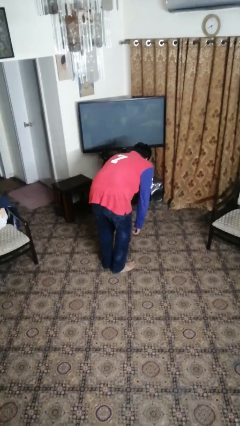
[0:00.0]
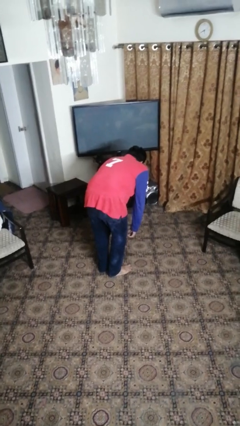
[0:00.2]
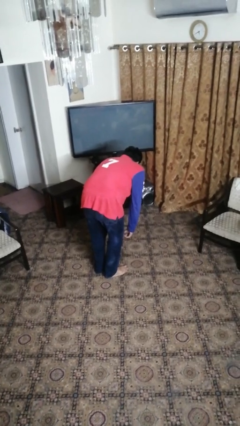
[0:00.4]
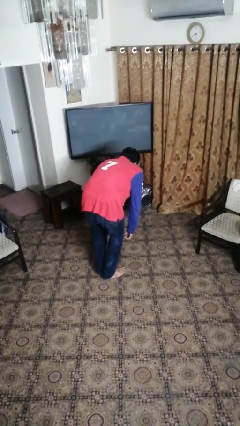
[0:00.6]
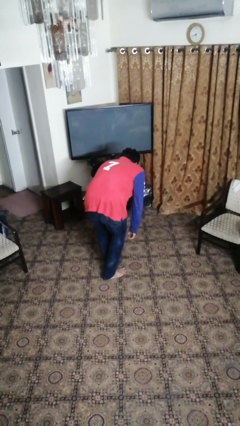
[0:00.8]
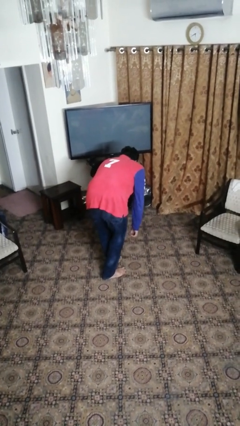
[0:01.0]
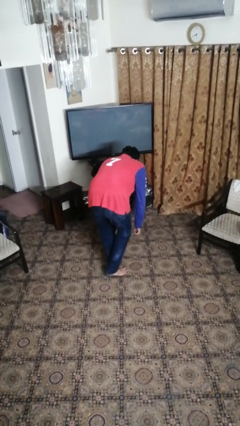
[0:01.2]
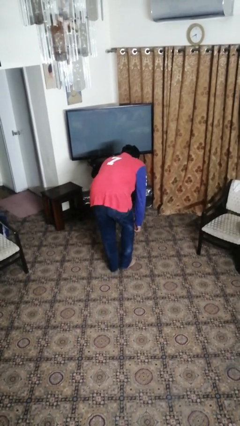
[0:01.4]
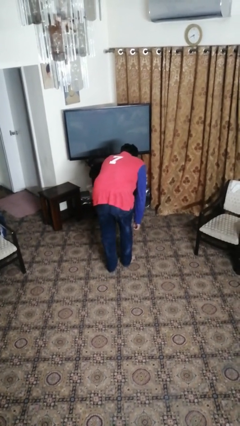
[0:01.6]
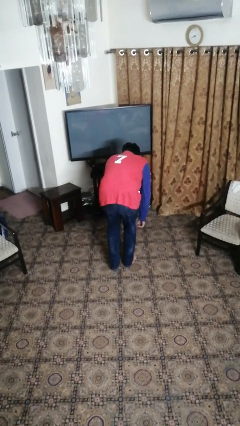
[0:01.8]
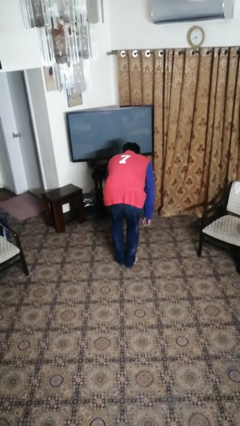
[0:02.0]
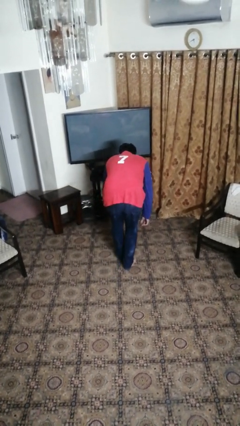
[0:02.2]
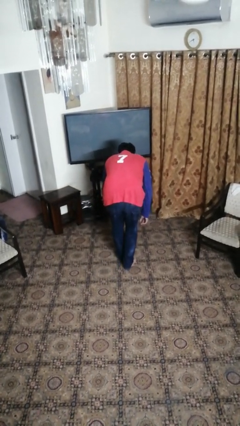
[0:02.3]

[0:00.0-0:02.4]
person walks tiptoe

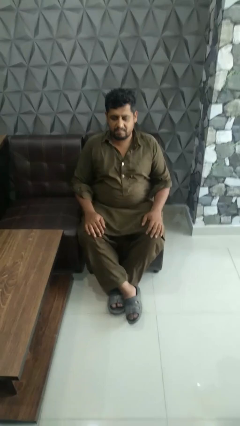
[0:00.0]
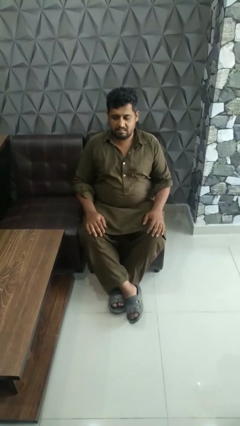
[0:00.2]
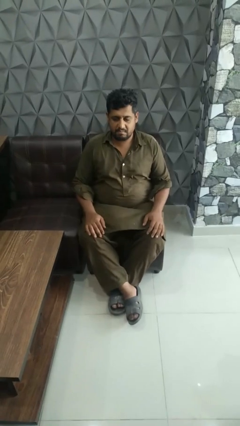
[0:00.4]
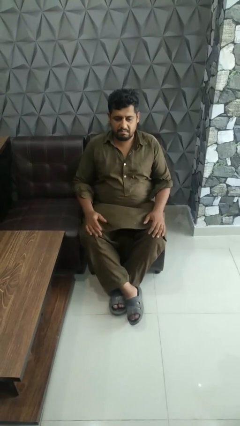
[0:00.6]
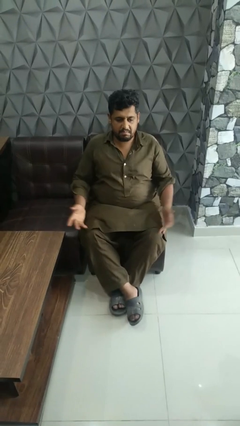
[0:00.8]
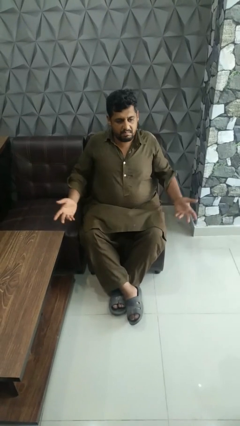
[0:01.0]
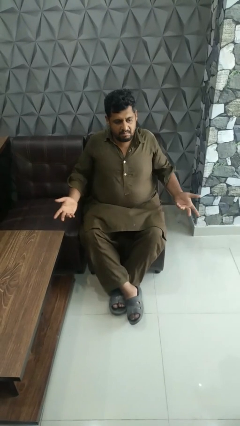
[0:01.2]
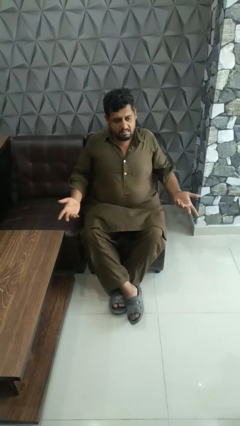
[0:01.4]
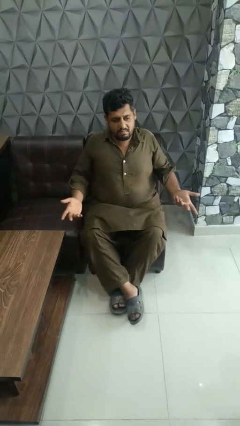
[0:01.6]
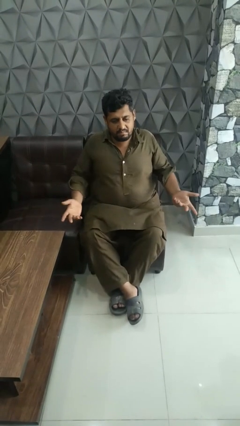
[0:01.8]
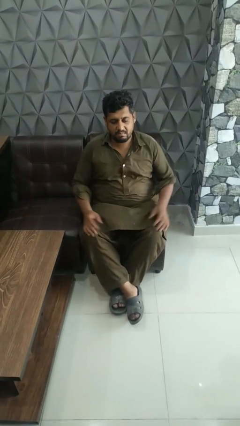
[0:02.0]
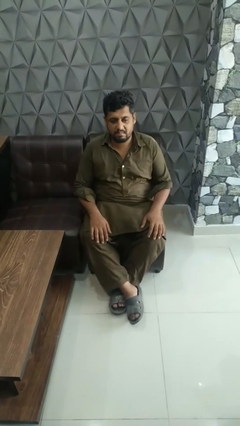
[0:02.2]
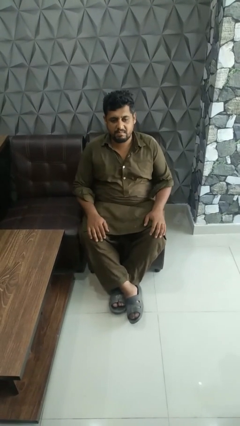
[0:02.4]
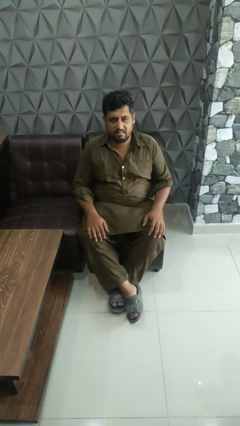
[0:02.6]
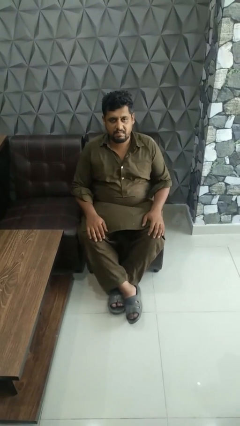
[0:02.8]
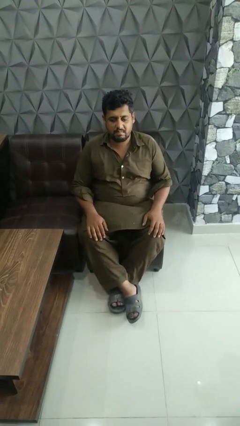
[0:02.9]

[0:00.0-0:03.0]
person shrugs

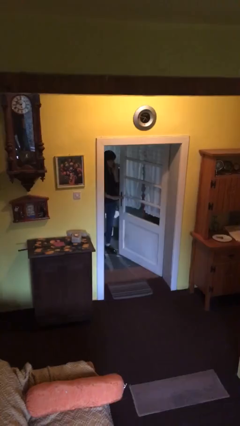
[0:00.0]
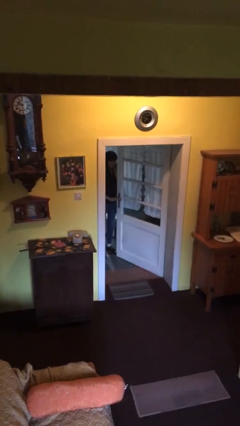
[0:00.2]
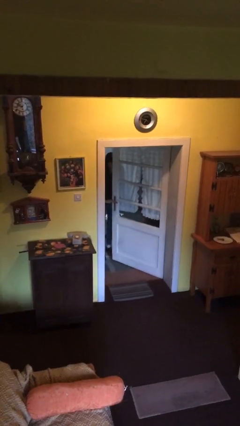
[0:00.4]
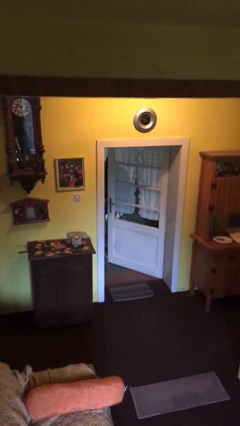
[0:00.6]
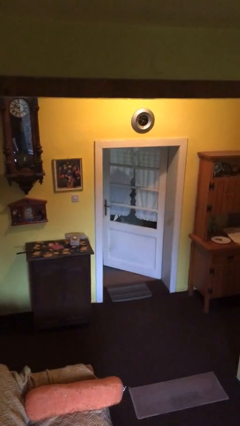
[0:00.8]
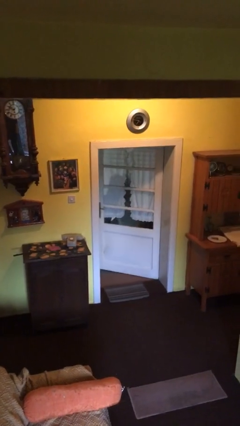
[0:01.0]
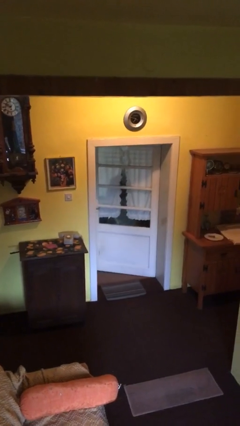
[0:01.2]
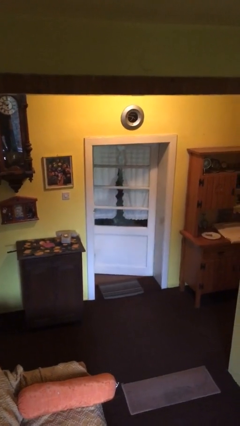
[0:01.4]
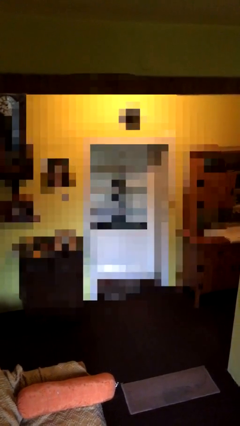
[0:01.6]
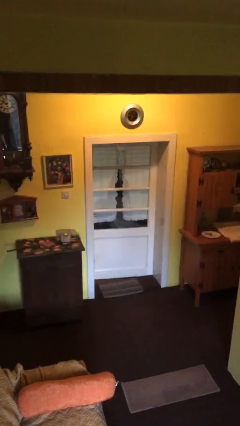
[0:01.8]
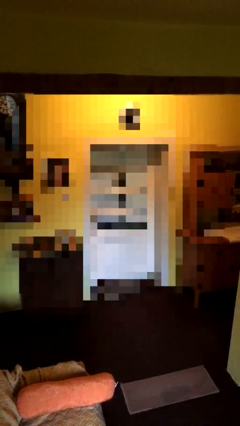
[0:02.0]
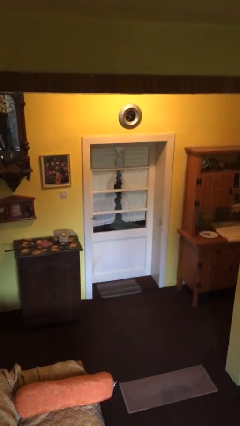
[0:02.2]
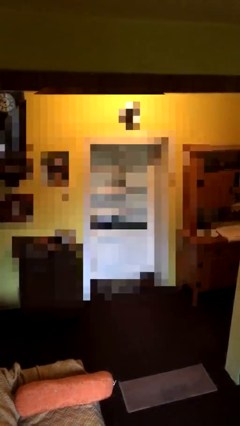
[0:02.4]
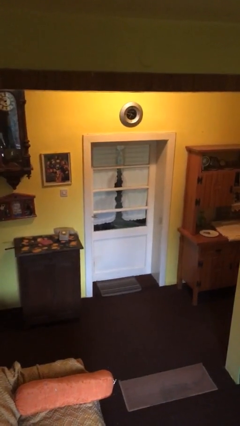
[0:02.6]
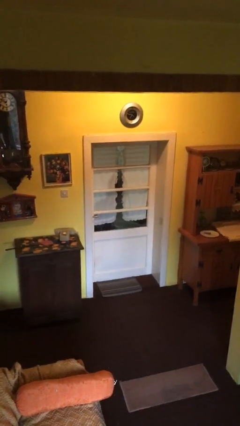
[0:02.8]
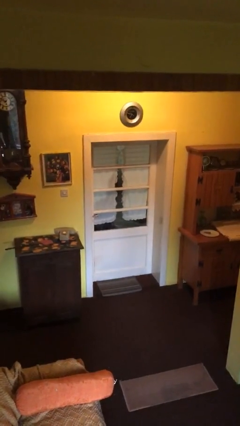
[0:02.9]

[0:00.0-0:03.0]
person closes facility door

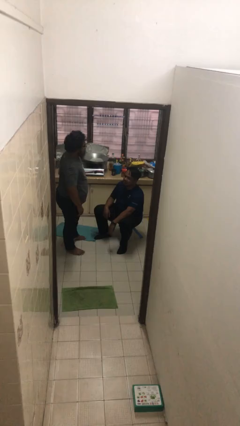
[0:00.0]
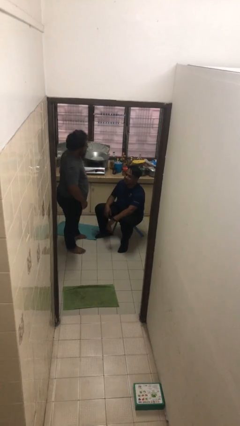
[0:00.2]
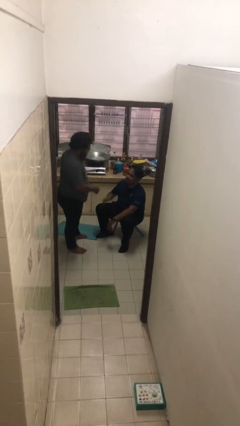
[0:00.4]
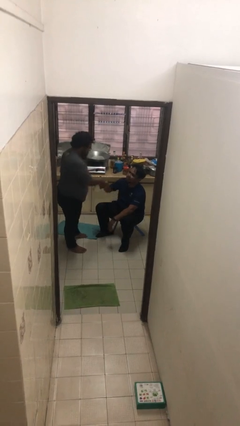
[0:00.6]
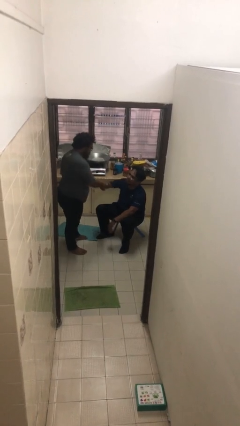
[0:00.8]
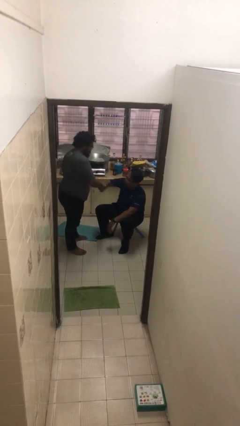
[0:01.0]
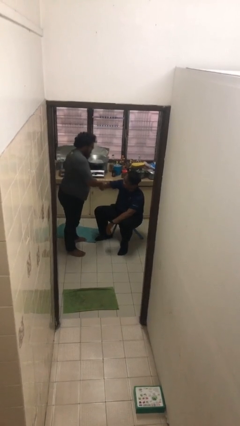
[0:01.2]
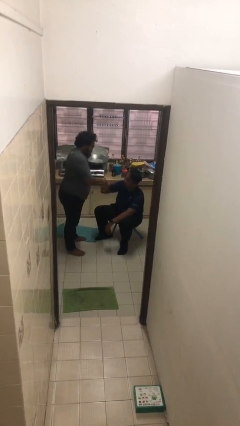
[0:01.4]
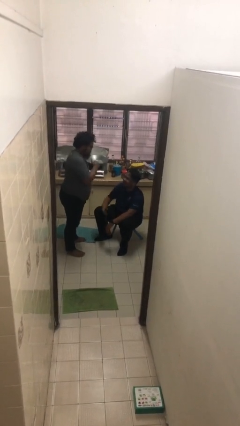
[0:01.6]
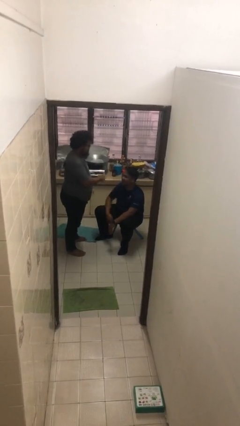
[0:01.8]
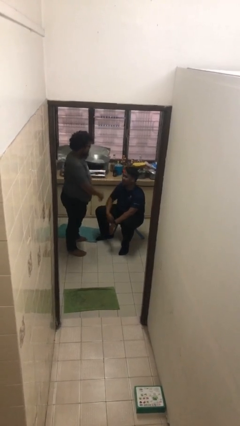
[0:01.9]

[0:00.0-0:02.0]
person shakes hand

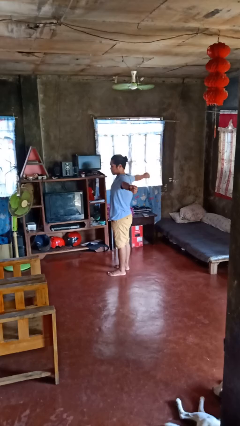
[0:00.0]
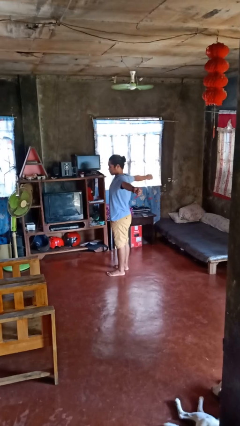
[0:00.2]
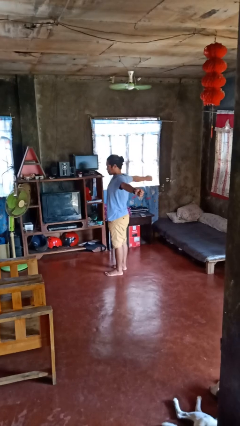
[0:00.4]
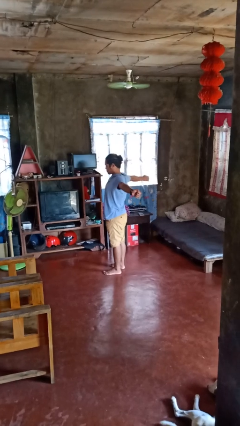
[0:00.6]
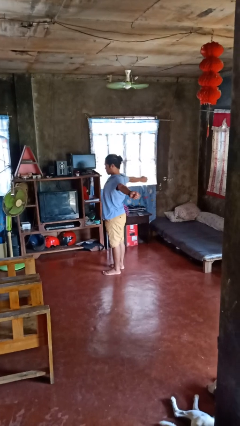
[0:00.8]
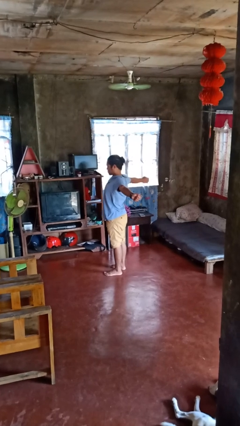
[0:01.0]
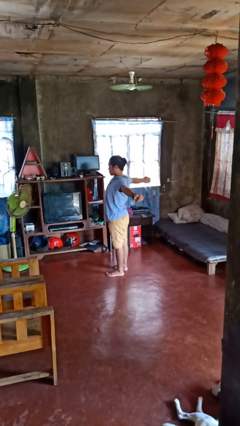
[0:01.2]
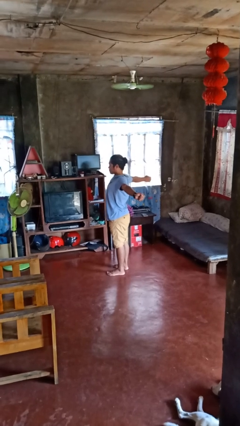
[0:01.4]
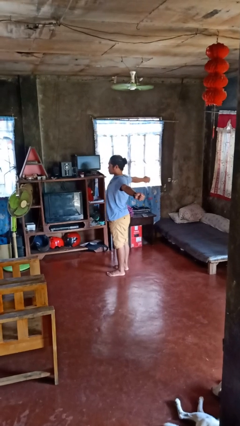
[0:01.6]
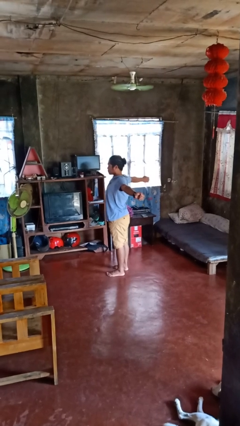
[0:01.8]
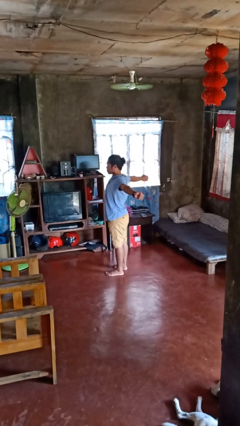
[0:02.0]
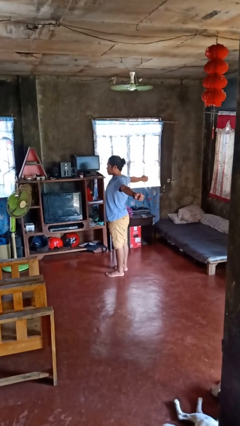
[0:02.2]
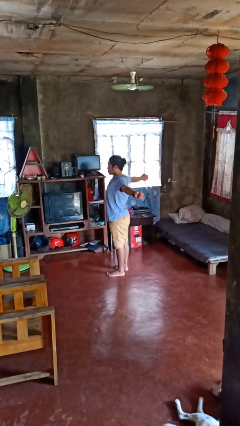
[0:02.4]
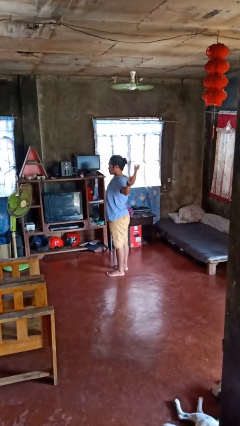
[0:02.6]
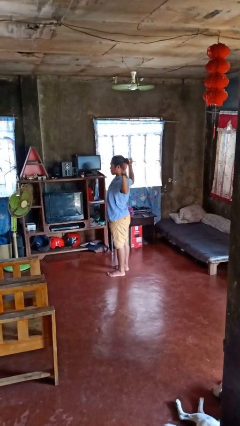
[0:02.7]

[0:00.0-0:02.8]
person stretches arms to side

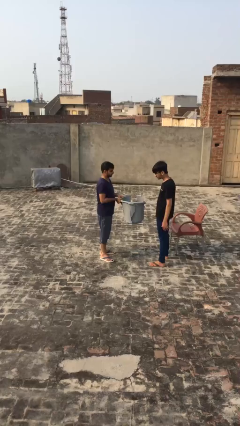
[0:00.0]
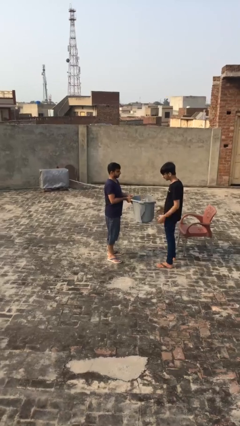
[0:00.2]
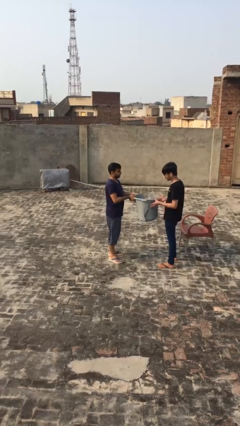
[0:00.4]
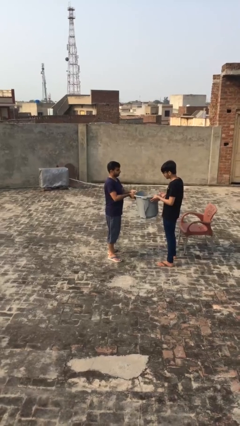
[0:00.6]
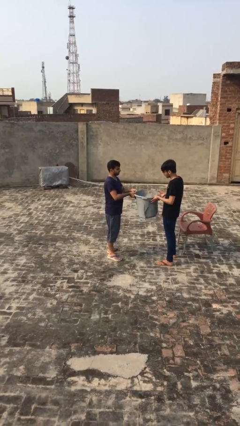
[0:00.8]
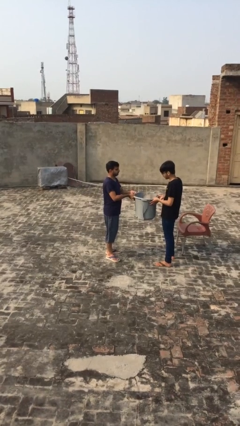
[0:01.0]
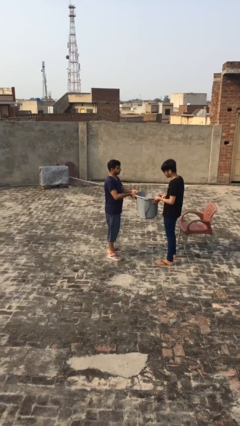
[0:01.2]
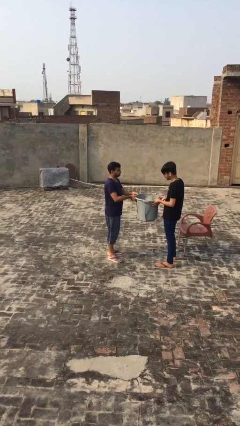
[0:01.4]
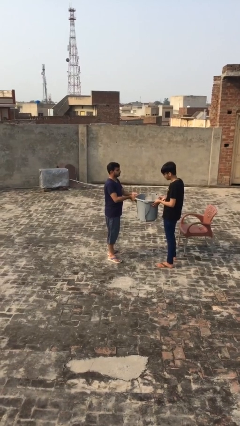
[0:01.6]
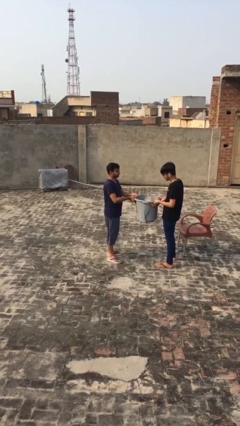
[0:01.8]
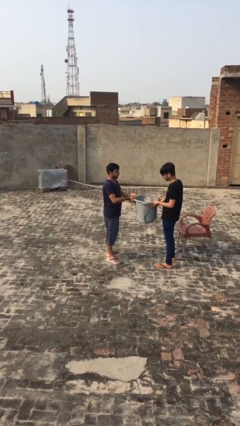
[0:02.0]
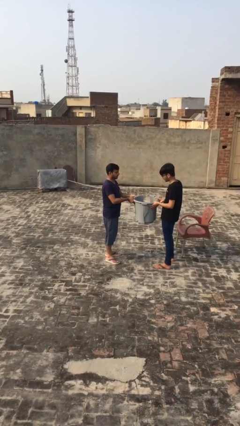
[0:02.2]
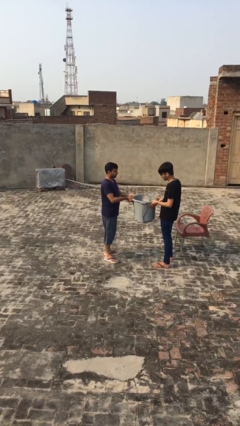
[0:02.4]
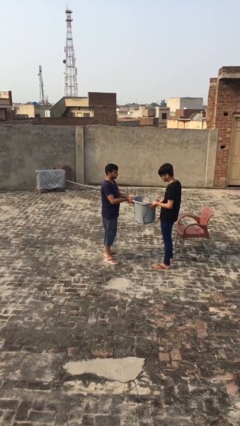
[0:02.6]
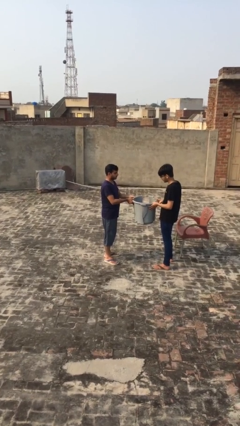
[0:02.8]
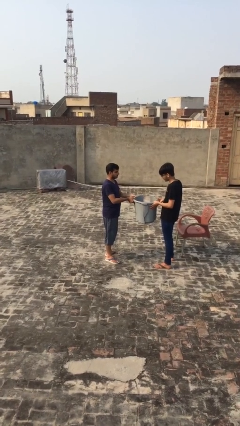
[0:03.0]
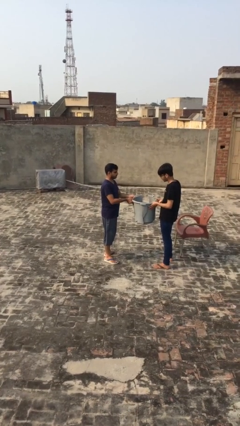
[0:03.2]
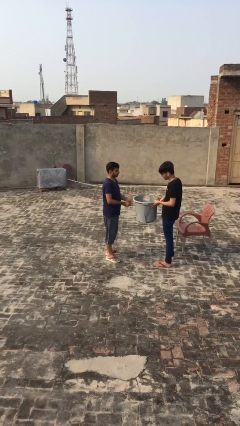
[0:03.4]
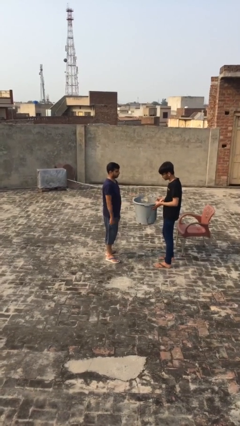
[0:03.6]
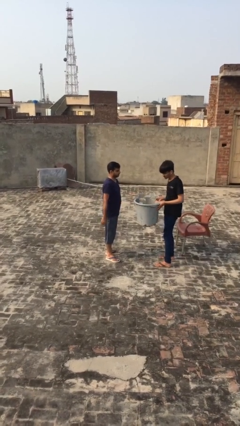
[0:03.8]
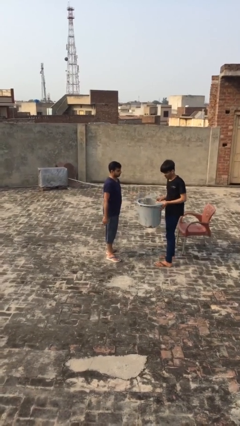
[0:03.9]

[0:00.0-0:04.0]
person transfers object to person
